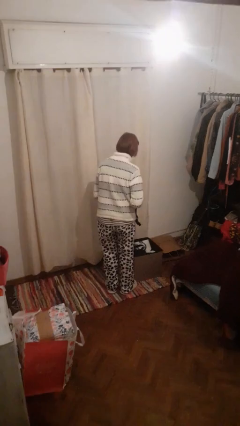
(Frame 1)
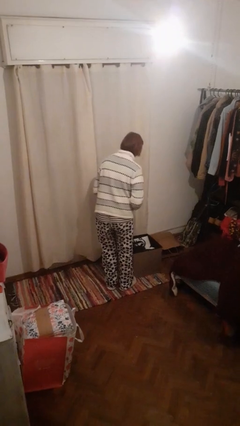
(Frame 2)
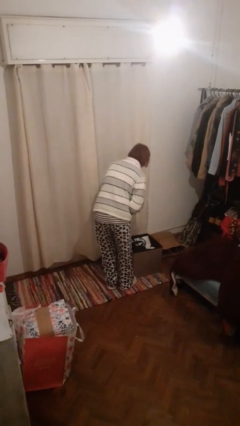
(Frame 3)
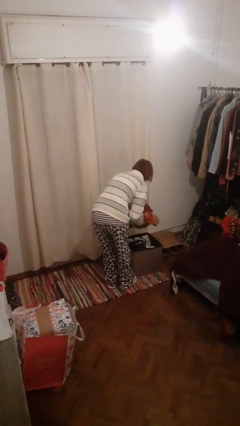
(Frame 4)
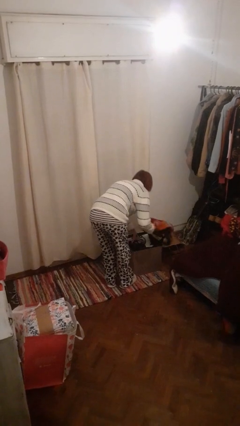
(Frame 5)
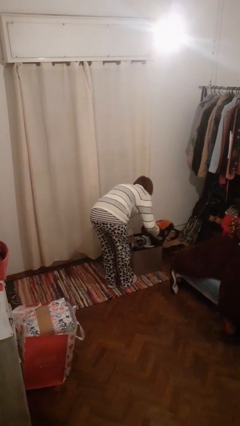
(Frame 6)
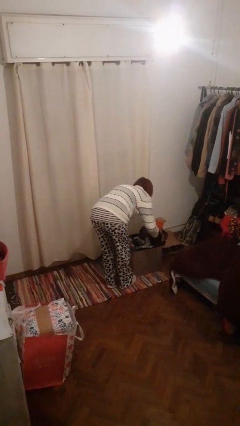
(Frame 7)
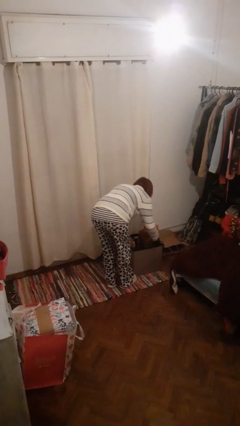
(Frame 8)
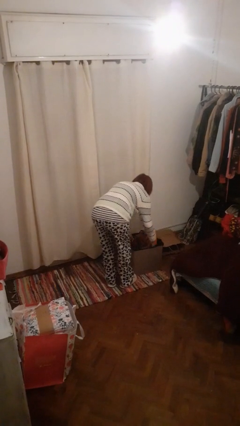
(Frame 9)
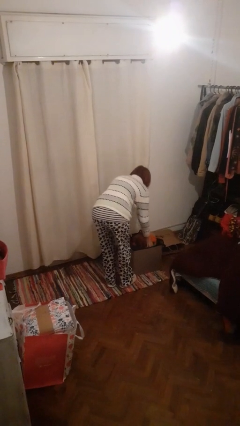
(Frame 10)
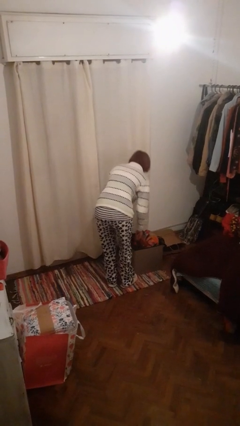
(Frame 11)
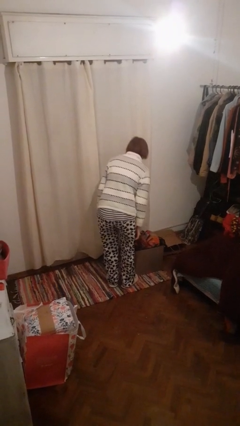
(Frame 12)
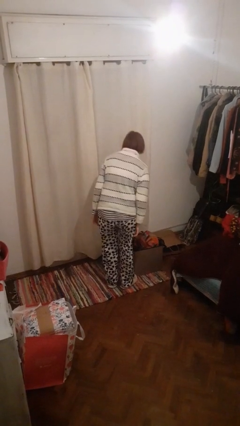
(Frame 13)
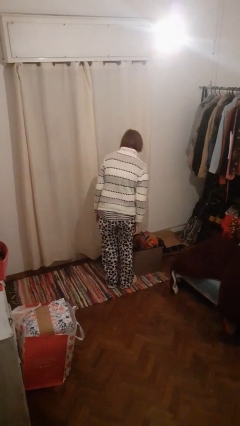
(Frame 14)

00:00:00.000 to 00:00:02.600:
person puts object into basket

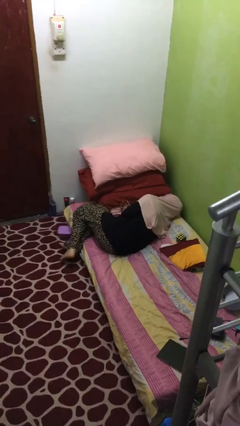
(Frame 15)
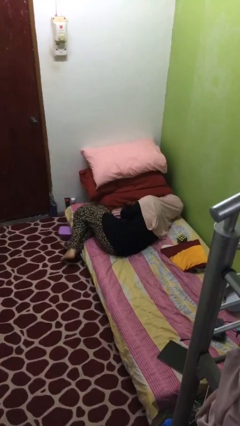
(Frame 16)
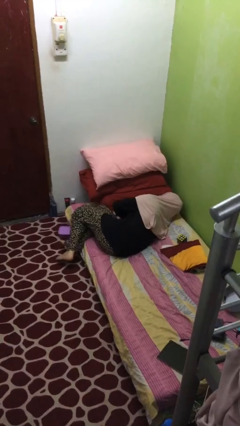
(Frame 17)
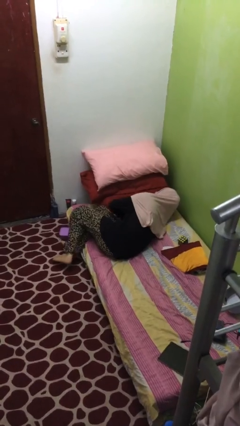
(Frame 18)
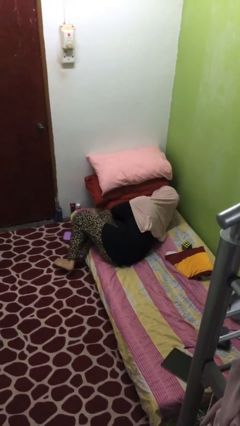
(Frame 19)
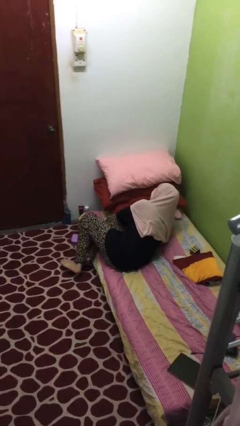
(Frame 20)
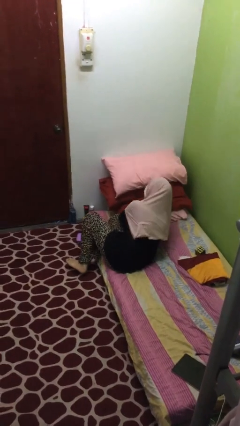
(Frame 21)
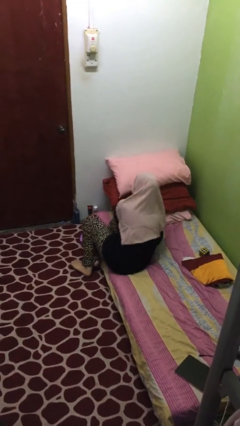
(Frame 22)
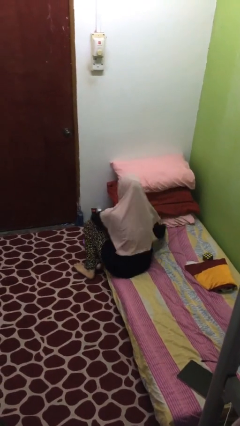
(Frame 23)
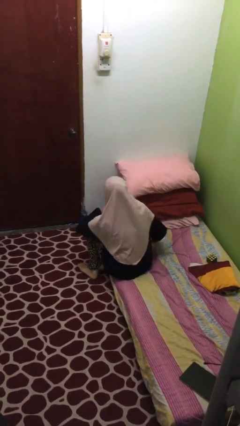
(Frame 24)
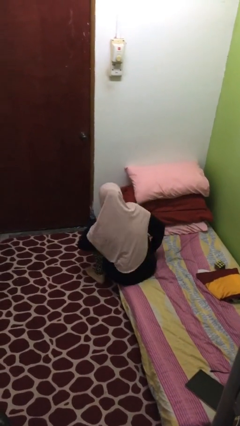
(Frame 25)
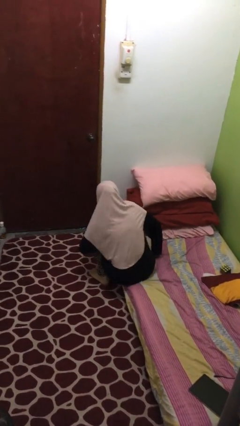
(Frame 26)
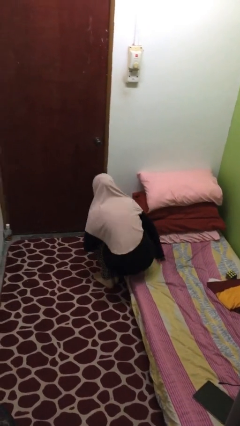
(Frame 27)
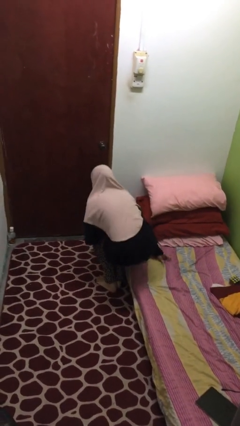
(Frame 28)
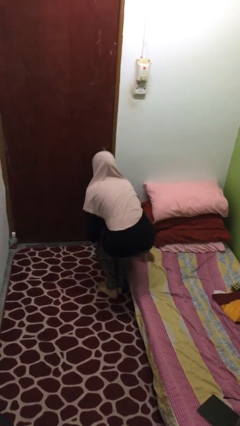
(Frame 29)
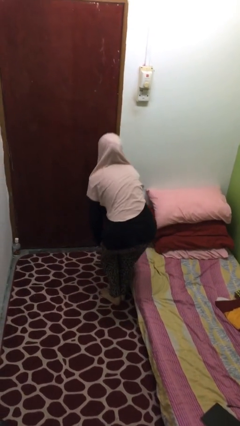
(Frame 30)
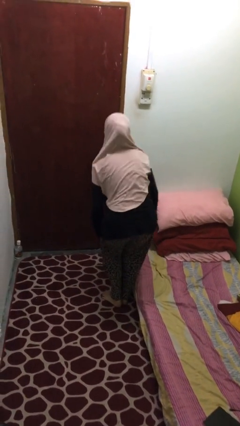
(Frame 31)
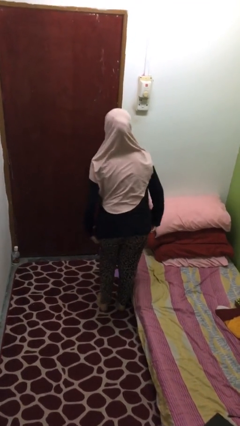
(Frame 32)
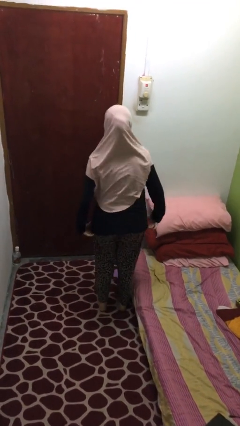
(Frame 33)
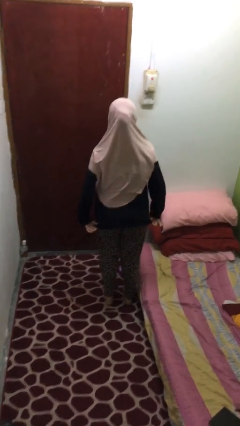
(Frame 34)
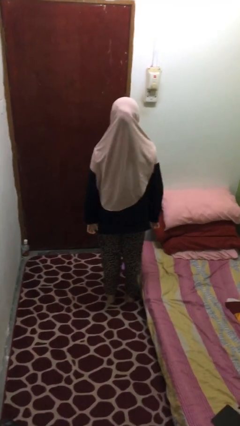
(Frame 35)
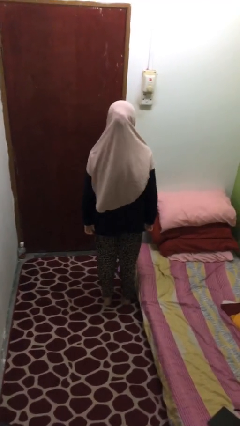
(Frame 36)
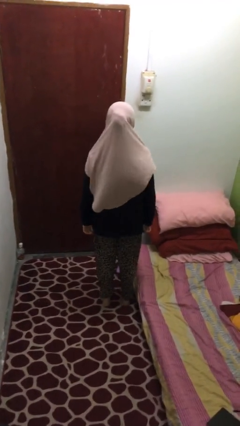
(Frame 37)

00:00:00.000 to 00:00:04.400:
person stands up

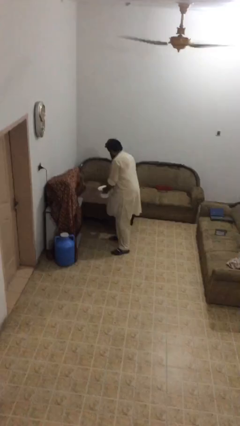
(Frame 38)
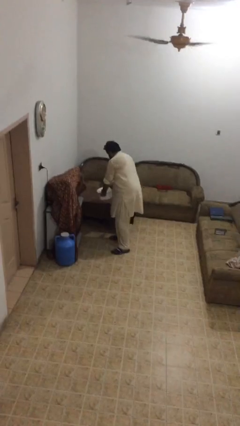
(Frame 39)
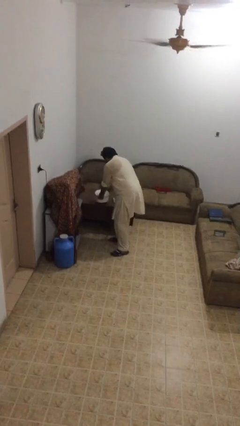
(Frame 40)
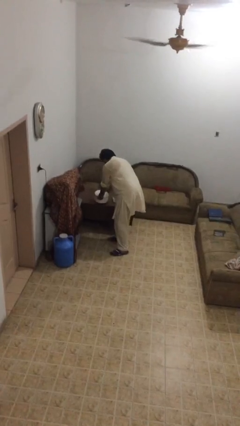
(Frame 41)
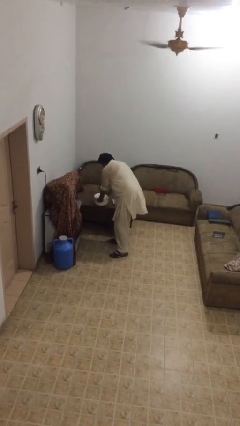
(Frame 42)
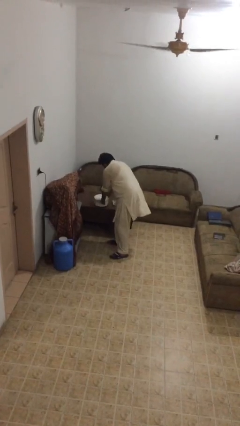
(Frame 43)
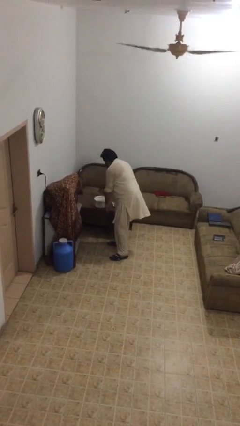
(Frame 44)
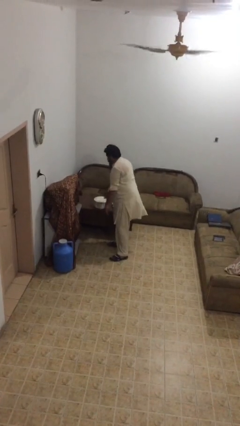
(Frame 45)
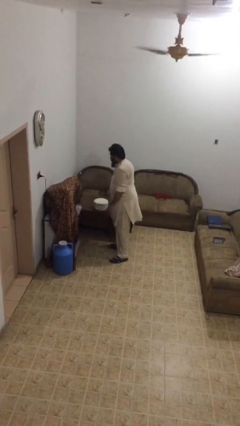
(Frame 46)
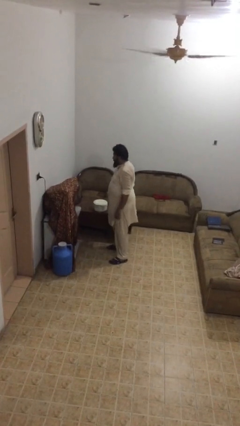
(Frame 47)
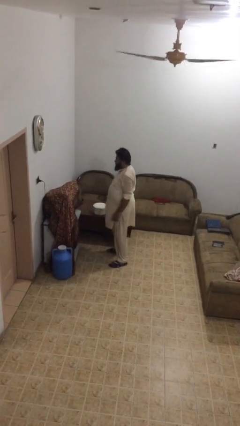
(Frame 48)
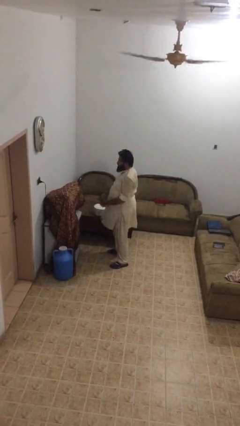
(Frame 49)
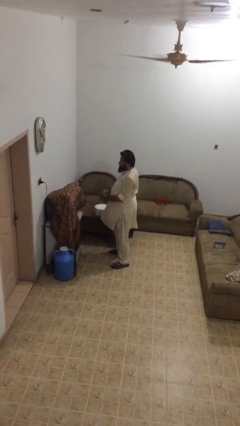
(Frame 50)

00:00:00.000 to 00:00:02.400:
person puts down object on table

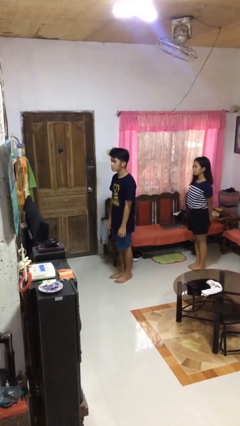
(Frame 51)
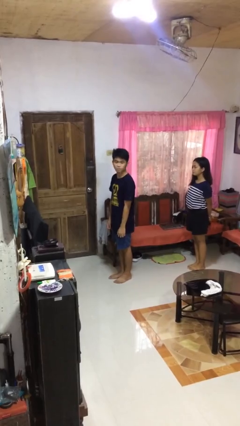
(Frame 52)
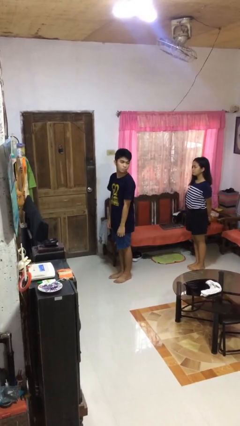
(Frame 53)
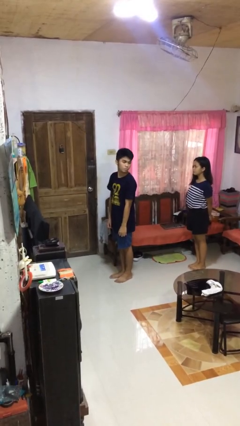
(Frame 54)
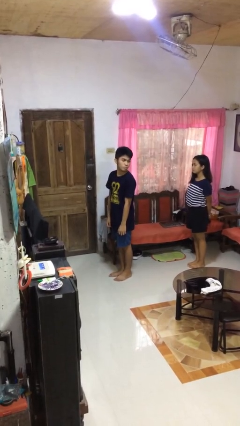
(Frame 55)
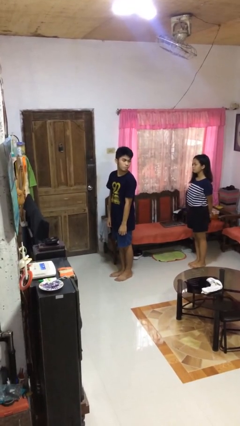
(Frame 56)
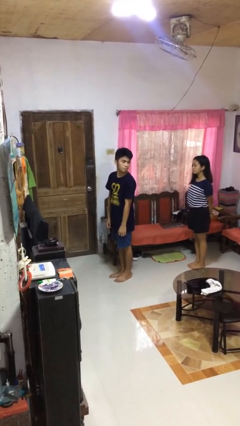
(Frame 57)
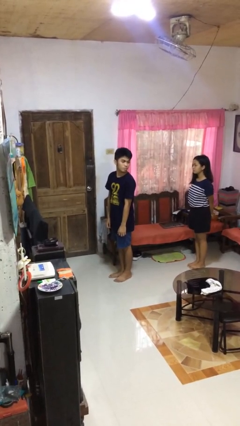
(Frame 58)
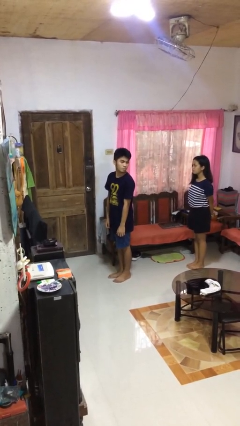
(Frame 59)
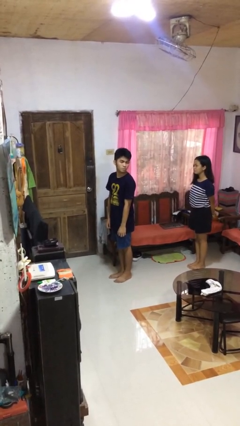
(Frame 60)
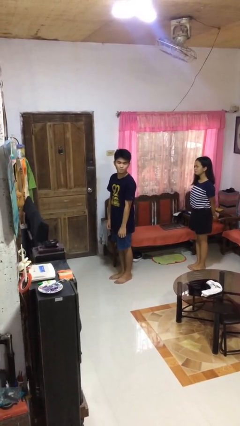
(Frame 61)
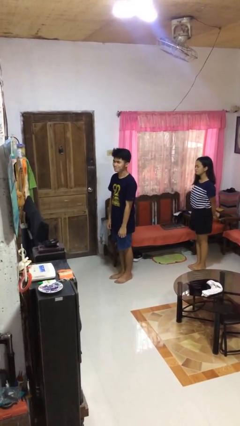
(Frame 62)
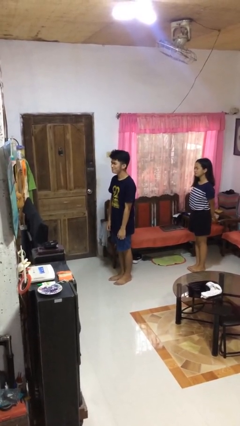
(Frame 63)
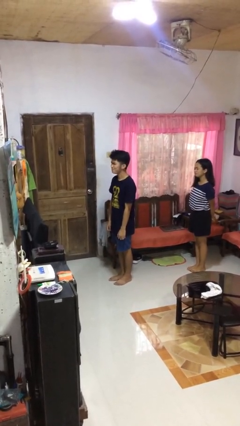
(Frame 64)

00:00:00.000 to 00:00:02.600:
person looks over shoulder

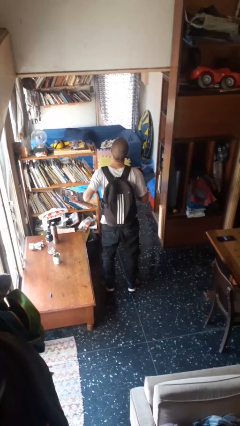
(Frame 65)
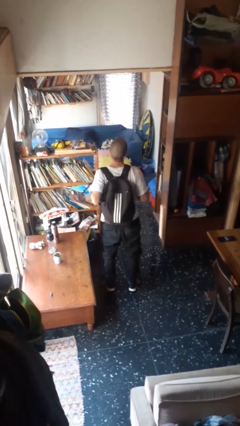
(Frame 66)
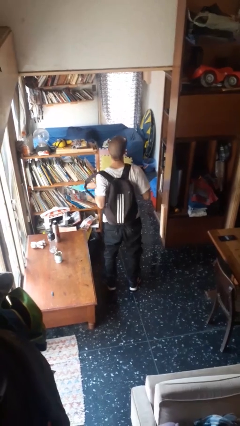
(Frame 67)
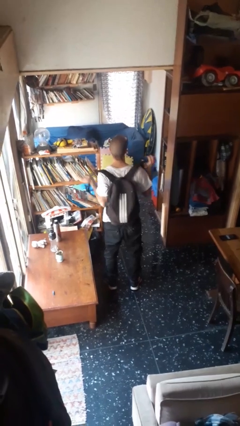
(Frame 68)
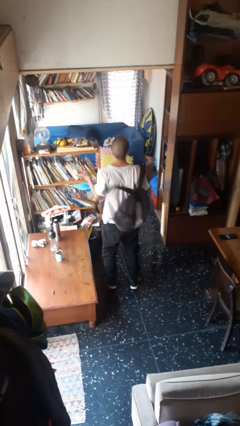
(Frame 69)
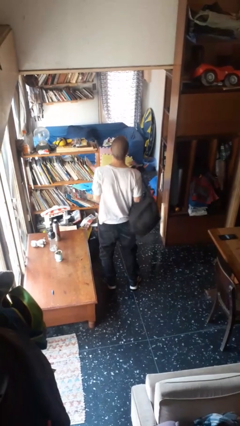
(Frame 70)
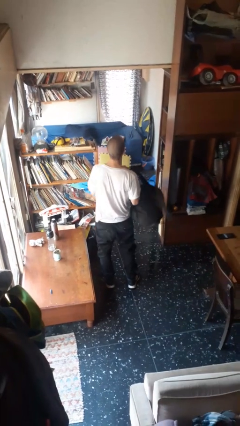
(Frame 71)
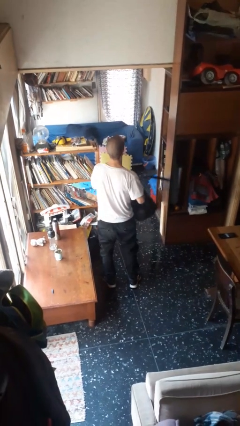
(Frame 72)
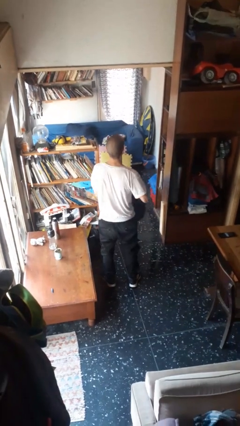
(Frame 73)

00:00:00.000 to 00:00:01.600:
person takes off backpack

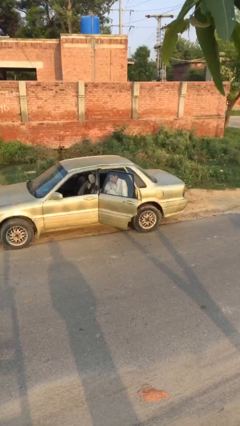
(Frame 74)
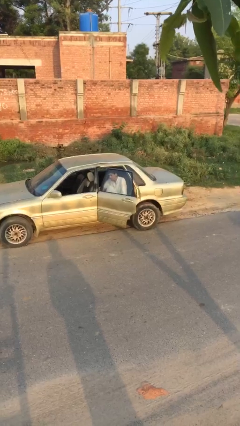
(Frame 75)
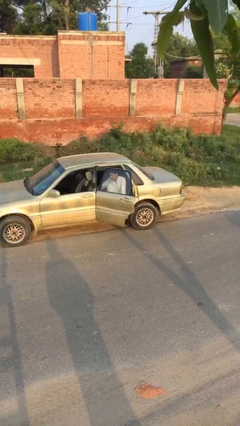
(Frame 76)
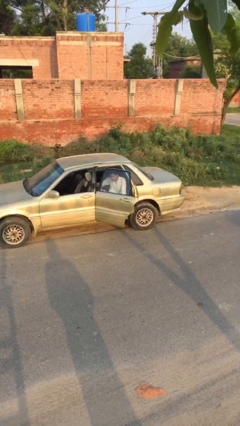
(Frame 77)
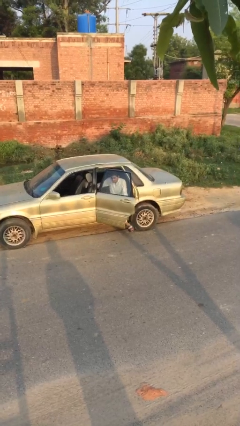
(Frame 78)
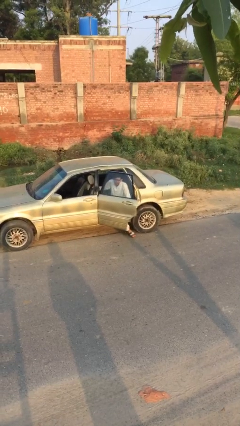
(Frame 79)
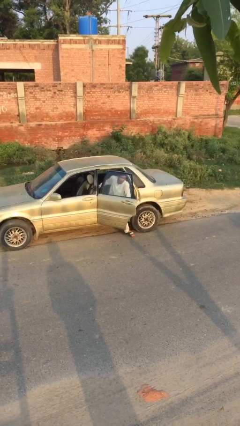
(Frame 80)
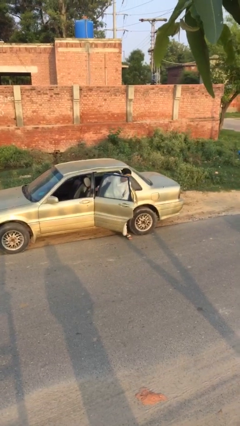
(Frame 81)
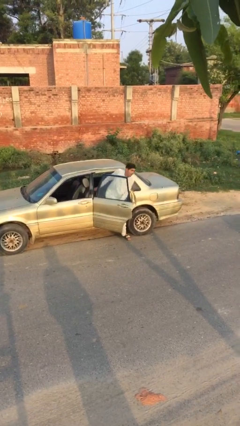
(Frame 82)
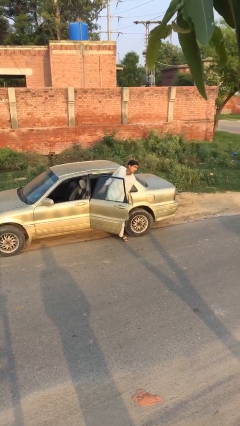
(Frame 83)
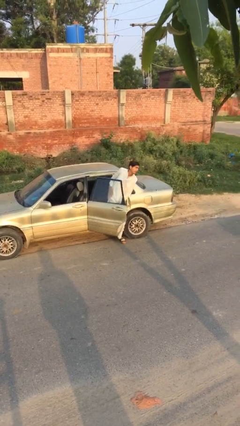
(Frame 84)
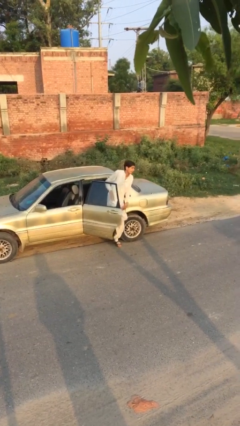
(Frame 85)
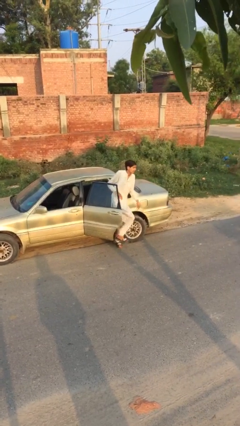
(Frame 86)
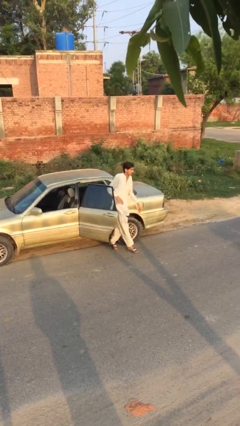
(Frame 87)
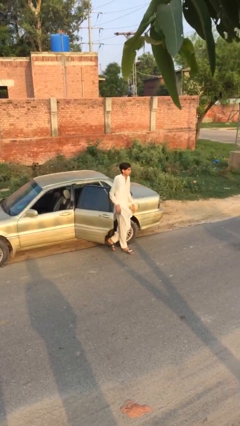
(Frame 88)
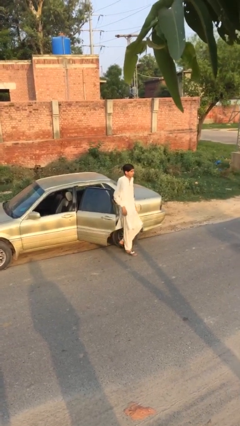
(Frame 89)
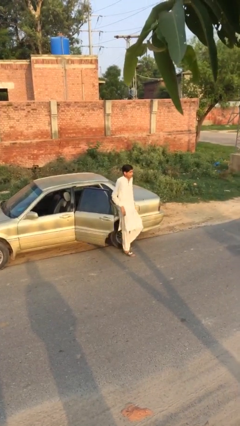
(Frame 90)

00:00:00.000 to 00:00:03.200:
person exits car

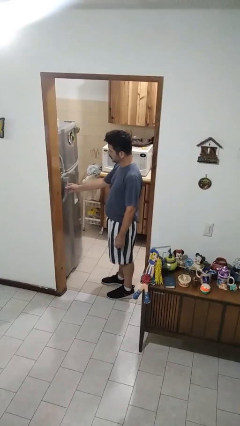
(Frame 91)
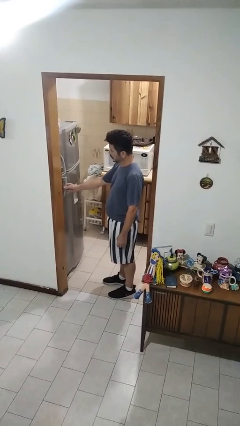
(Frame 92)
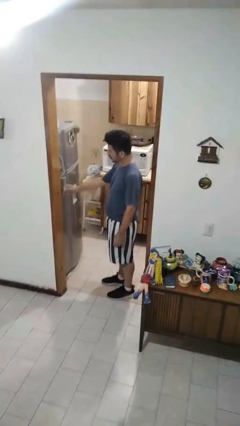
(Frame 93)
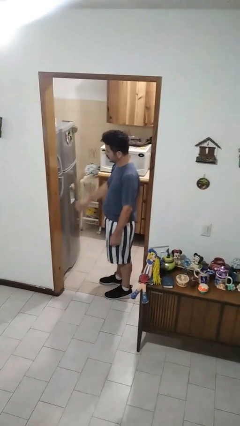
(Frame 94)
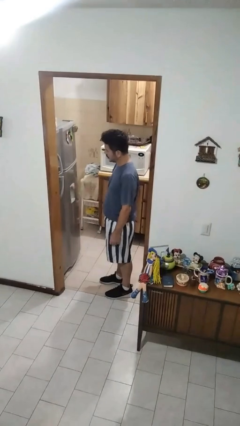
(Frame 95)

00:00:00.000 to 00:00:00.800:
person closes refrigerator
